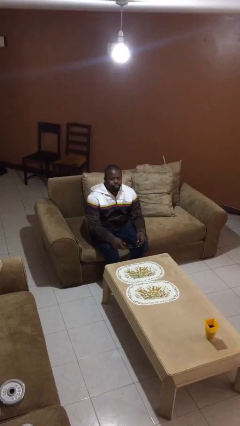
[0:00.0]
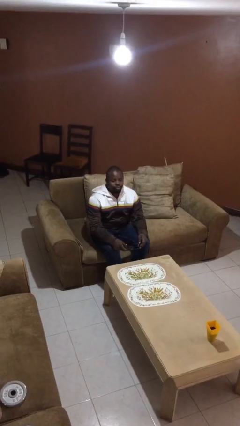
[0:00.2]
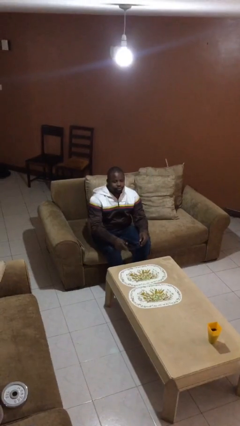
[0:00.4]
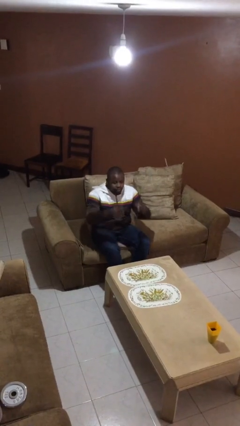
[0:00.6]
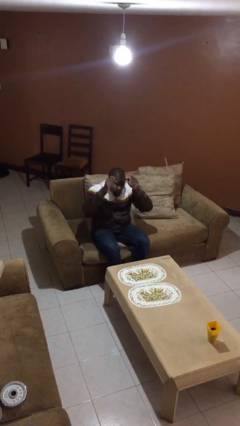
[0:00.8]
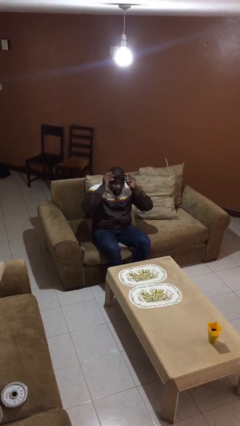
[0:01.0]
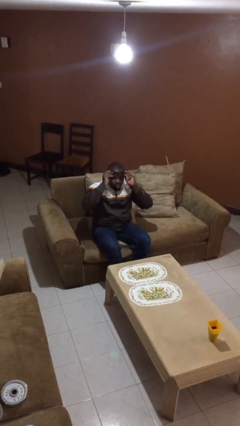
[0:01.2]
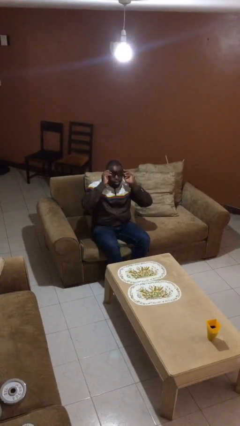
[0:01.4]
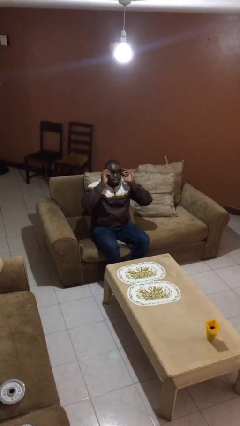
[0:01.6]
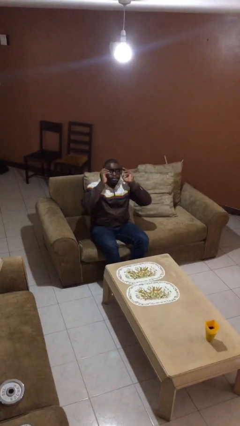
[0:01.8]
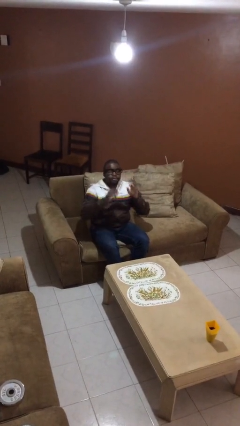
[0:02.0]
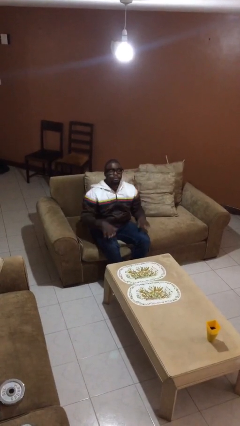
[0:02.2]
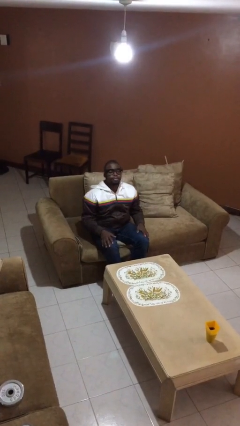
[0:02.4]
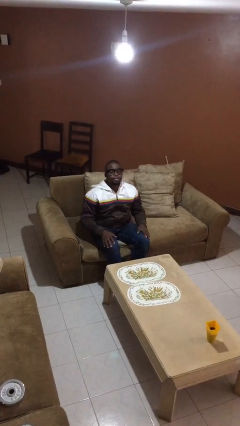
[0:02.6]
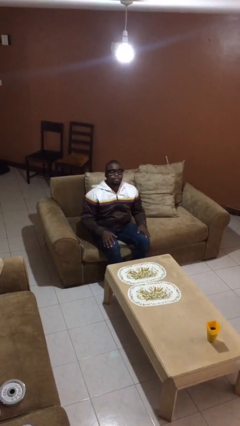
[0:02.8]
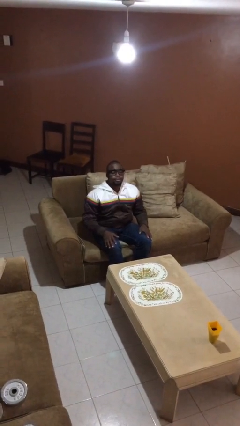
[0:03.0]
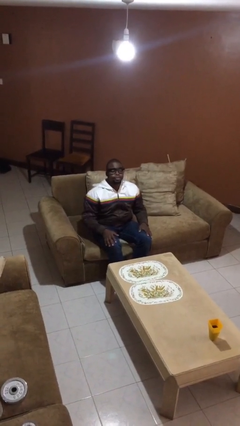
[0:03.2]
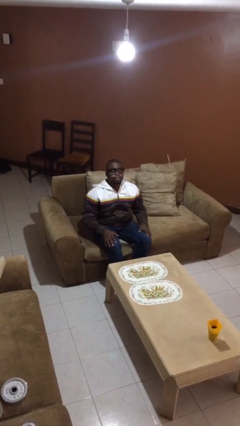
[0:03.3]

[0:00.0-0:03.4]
person puts on glasses

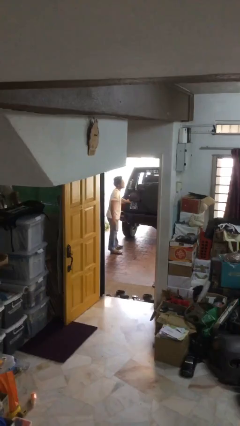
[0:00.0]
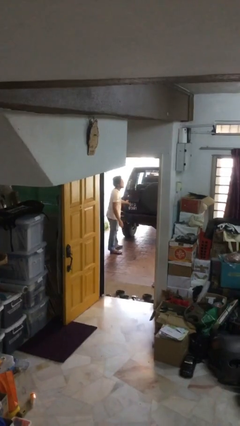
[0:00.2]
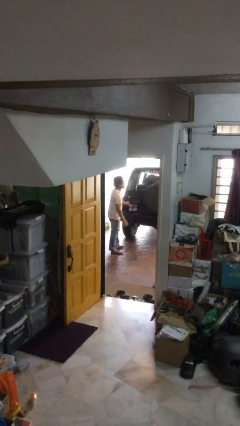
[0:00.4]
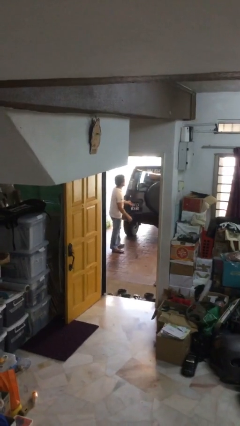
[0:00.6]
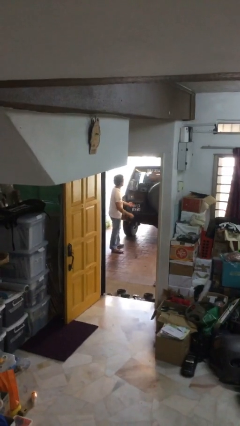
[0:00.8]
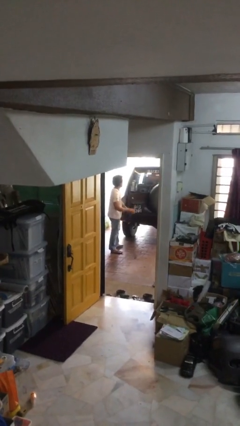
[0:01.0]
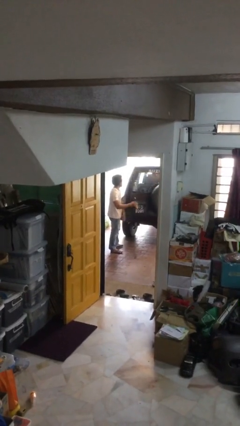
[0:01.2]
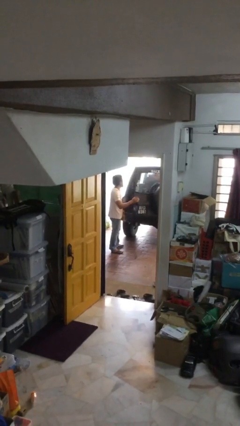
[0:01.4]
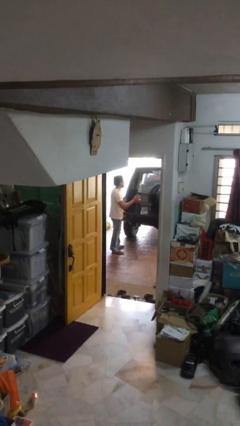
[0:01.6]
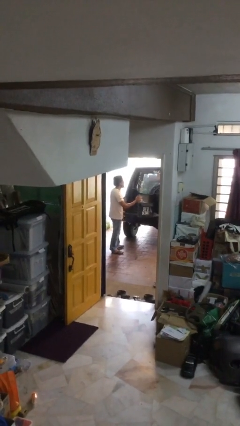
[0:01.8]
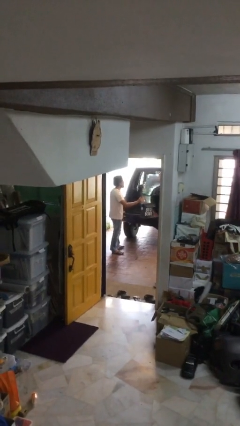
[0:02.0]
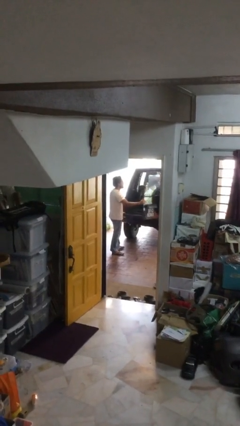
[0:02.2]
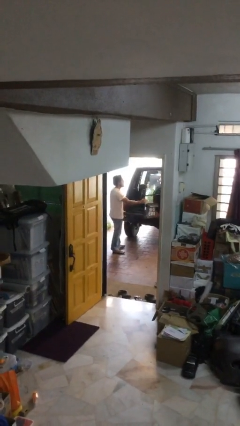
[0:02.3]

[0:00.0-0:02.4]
person opens car trunk

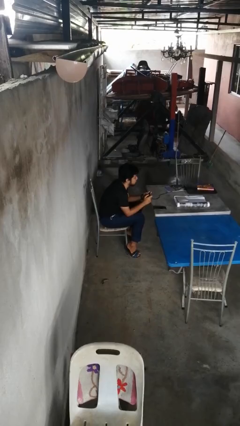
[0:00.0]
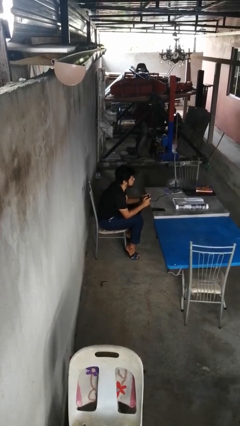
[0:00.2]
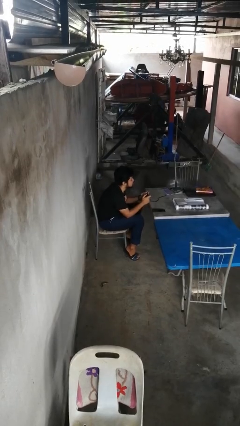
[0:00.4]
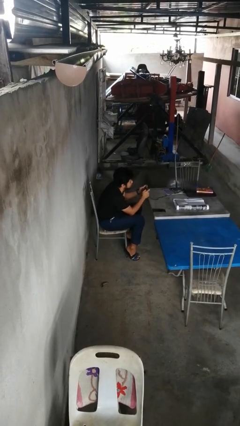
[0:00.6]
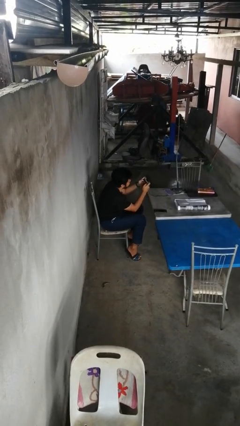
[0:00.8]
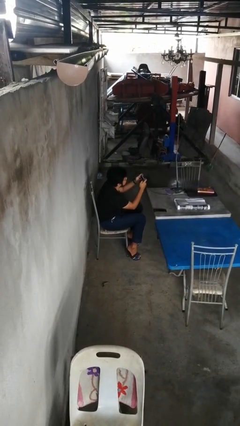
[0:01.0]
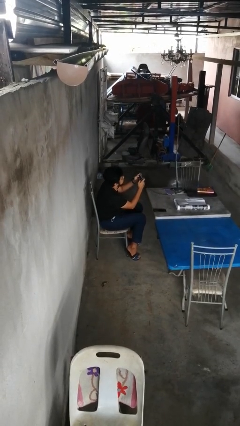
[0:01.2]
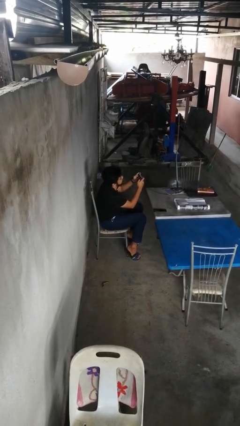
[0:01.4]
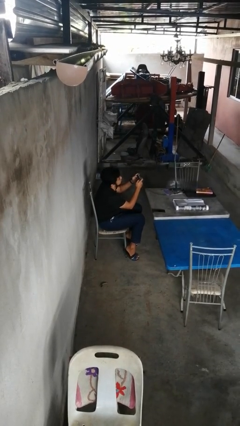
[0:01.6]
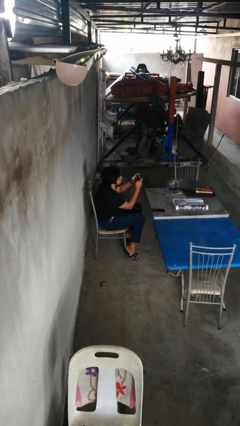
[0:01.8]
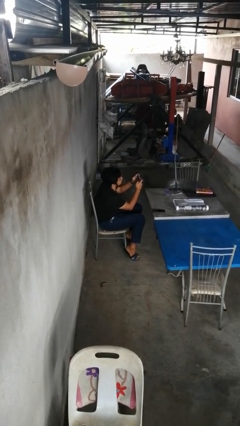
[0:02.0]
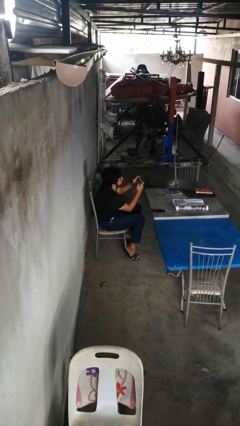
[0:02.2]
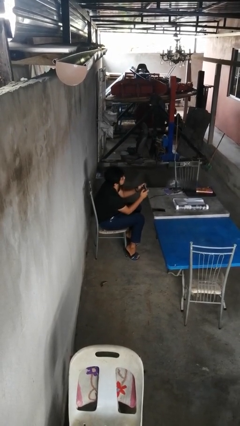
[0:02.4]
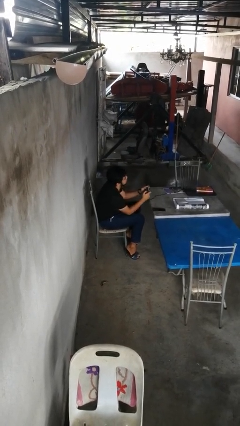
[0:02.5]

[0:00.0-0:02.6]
person interacts with handheld game

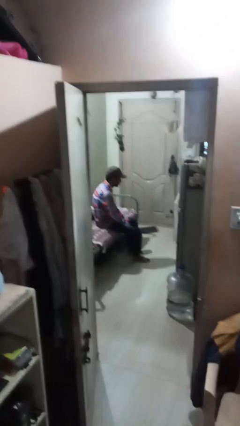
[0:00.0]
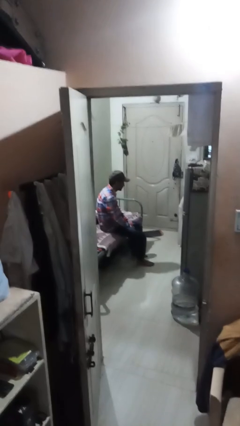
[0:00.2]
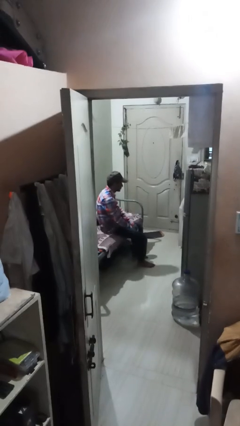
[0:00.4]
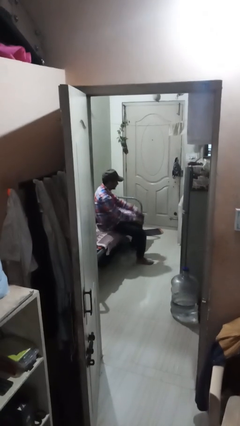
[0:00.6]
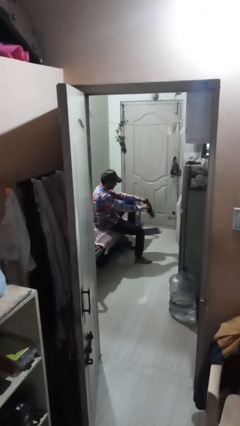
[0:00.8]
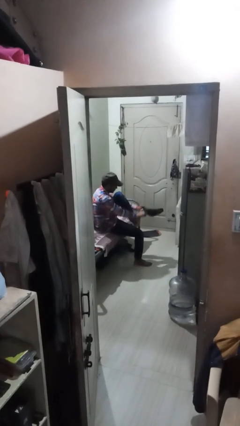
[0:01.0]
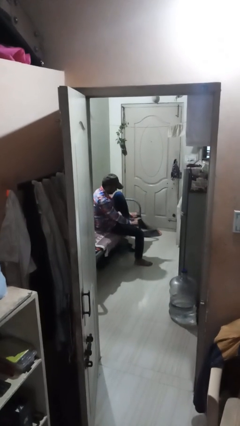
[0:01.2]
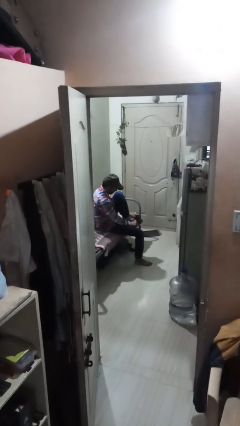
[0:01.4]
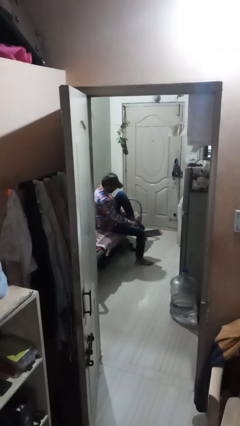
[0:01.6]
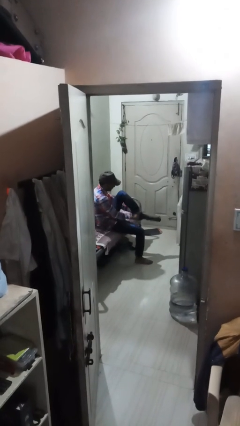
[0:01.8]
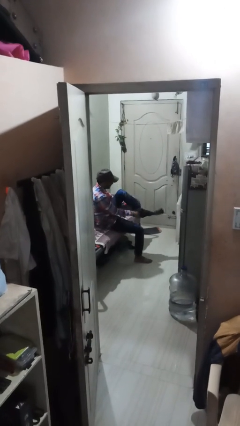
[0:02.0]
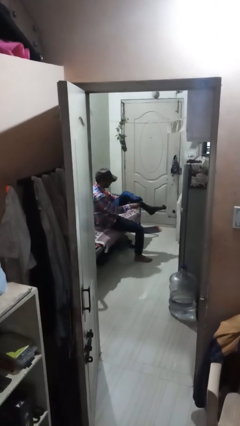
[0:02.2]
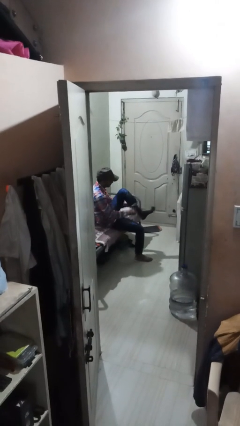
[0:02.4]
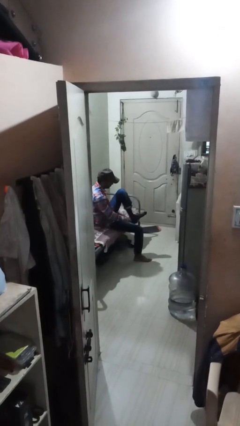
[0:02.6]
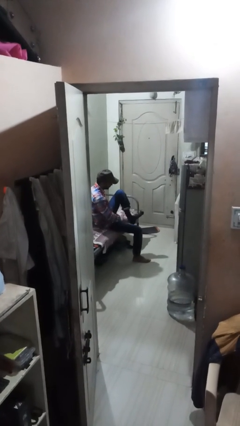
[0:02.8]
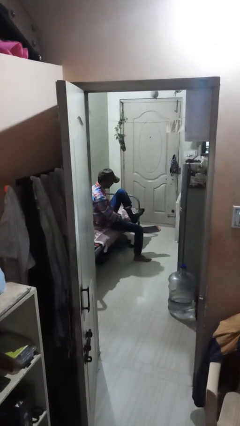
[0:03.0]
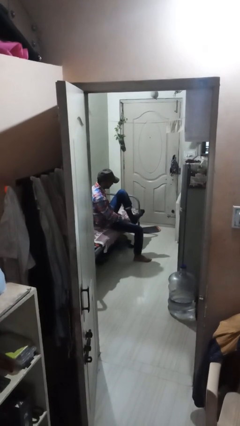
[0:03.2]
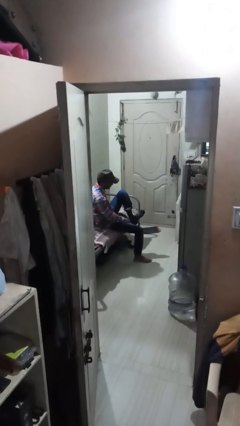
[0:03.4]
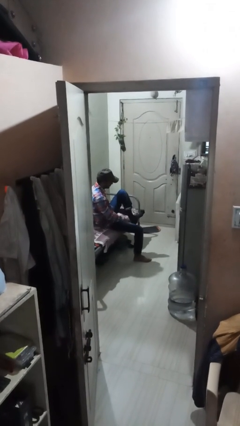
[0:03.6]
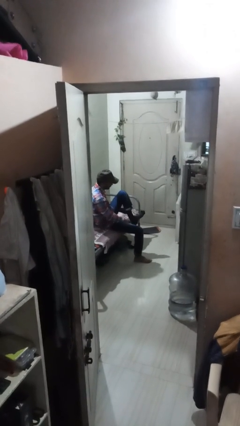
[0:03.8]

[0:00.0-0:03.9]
person puts on socks

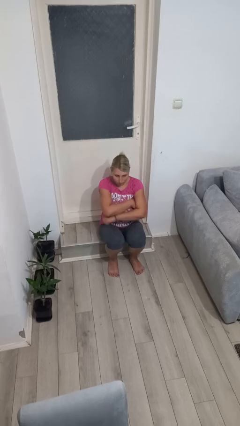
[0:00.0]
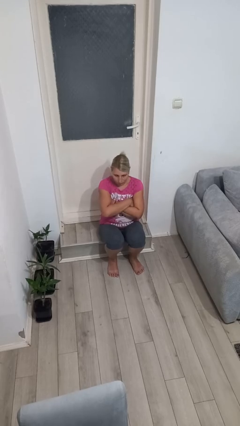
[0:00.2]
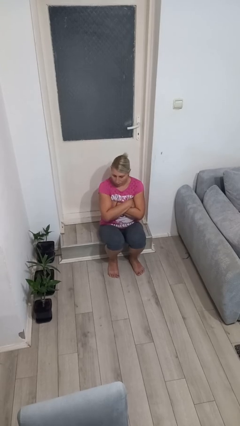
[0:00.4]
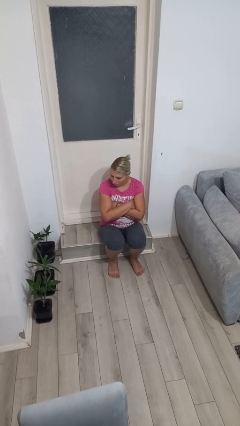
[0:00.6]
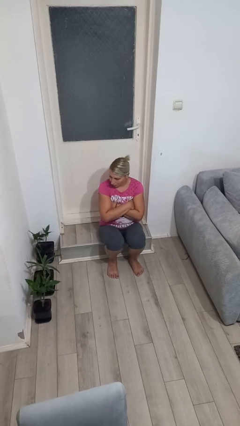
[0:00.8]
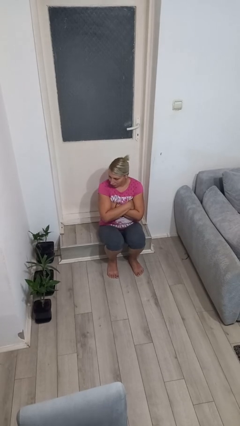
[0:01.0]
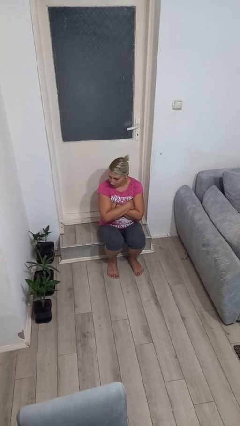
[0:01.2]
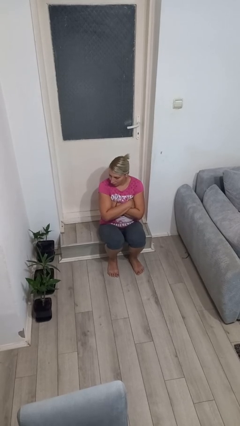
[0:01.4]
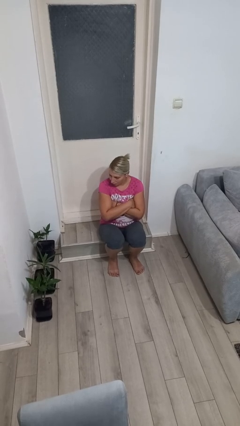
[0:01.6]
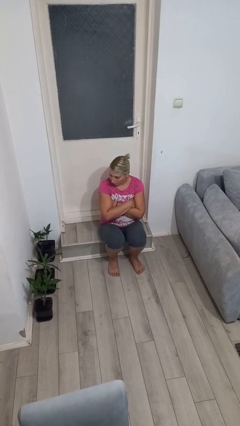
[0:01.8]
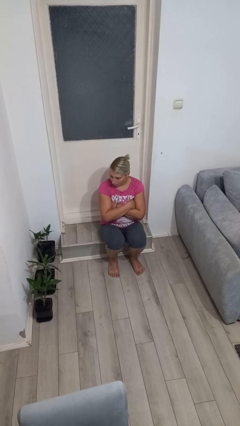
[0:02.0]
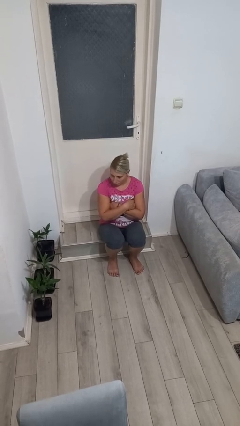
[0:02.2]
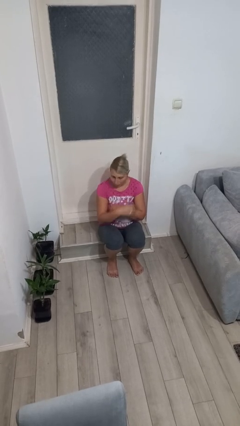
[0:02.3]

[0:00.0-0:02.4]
person crosses arms

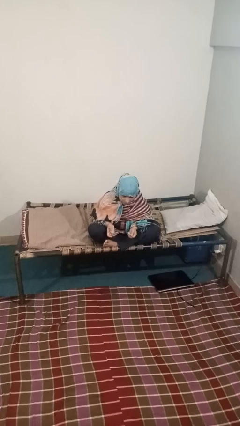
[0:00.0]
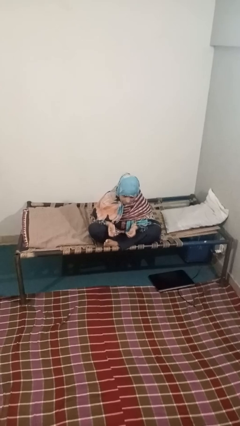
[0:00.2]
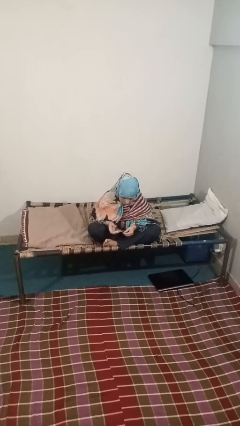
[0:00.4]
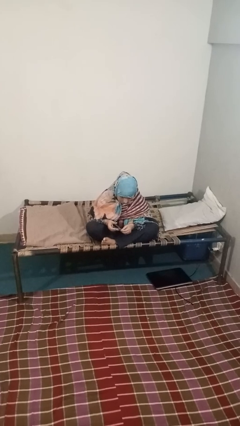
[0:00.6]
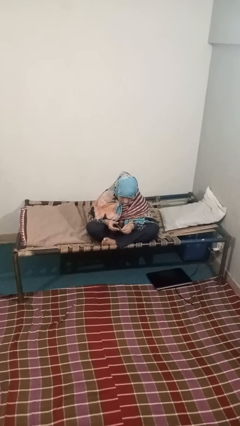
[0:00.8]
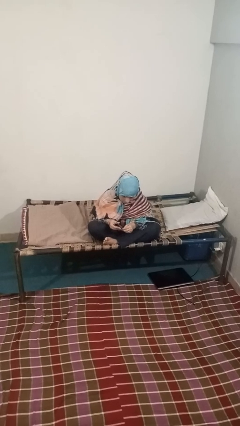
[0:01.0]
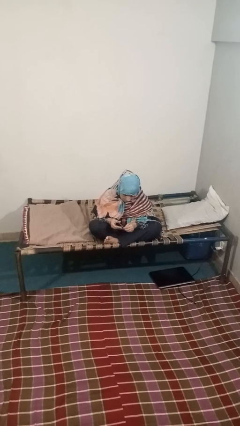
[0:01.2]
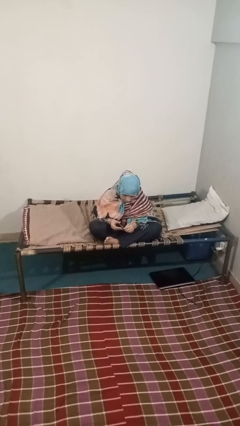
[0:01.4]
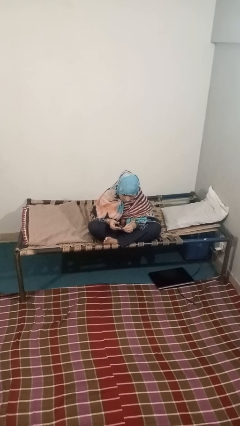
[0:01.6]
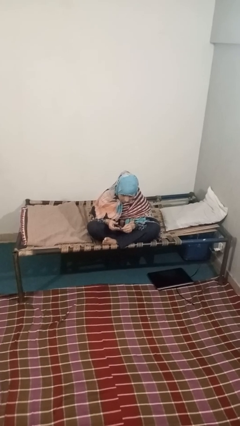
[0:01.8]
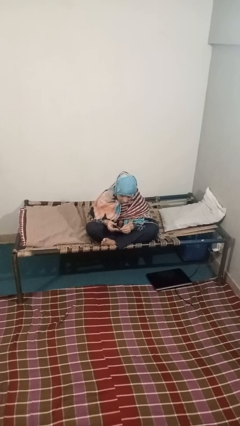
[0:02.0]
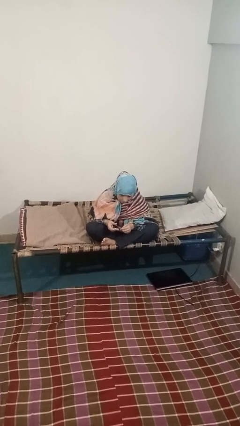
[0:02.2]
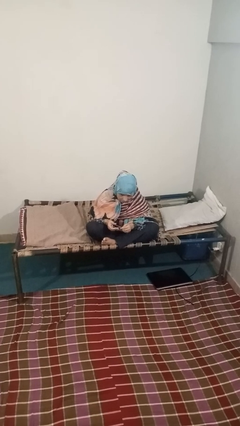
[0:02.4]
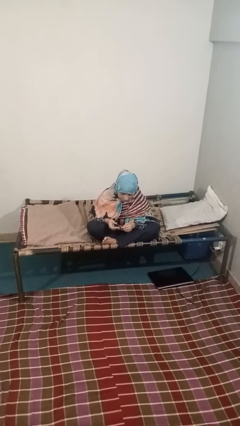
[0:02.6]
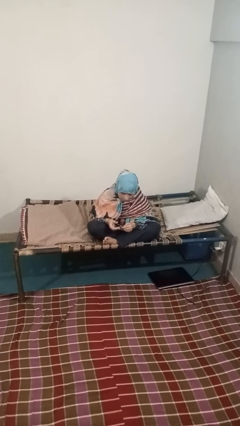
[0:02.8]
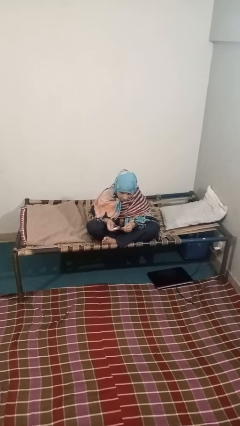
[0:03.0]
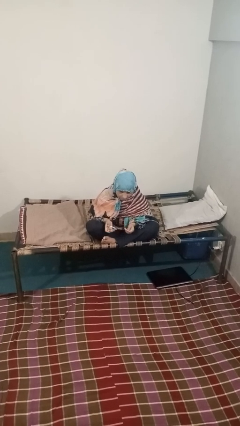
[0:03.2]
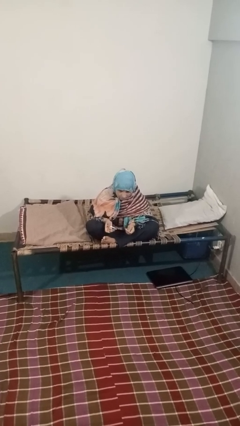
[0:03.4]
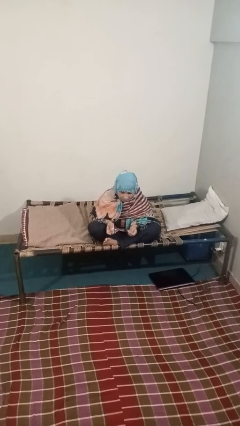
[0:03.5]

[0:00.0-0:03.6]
person clips fingernails
